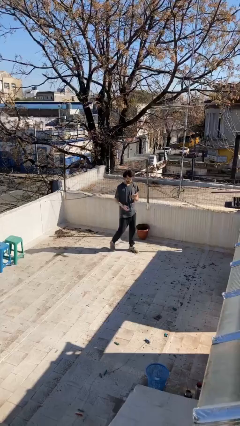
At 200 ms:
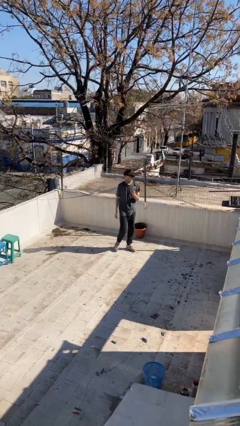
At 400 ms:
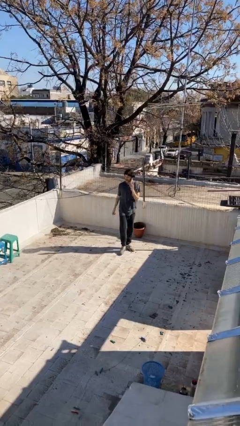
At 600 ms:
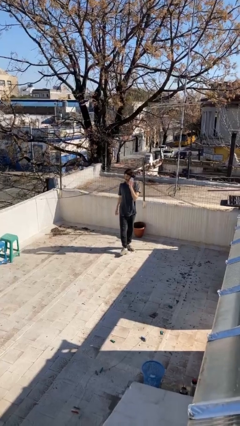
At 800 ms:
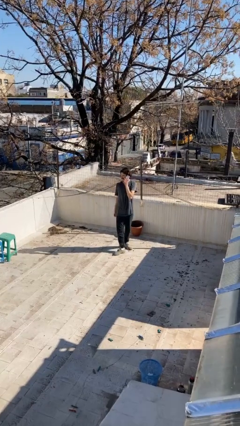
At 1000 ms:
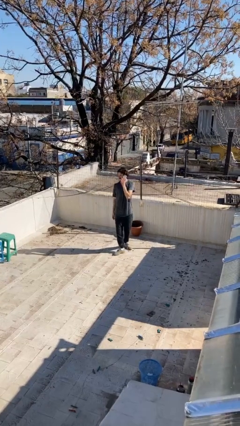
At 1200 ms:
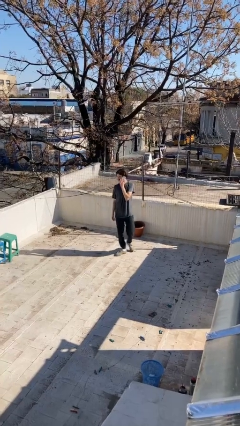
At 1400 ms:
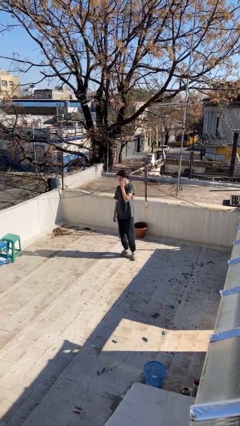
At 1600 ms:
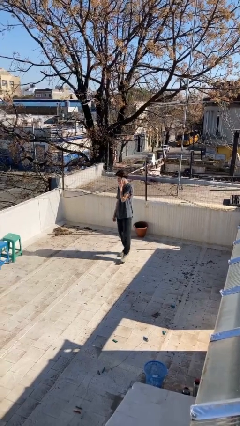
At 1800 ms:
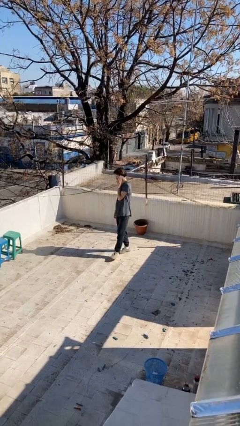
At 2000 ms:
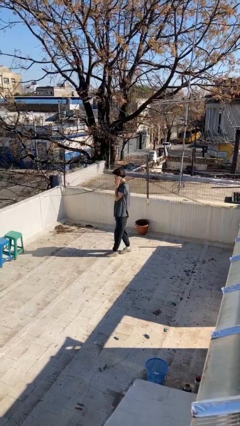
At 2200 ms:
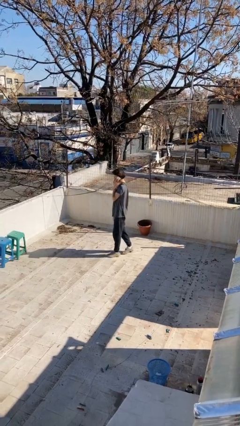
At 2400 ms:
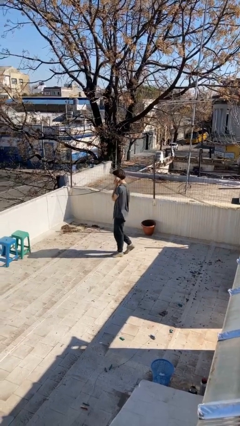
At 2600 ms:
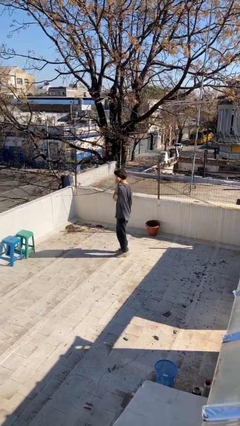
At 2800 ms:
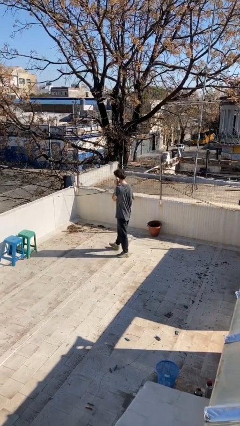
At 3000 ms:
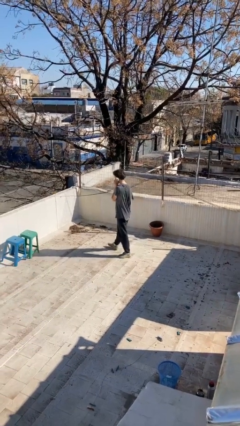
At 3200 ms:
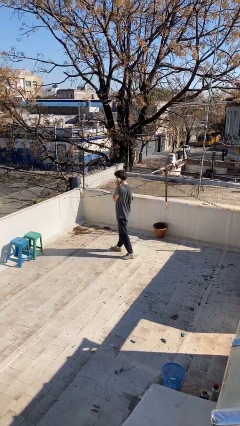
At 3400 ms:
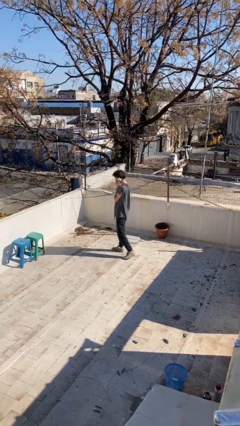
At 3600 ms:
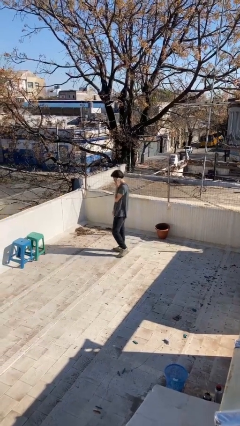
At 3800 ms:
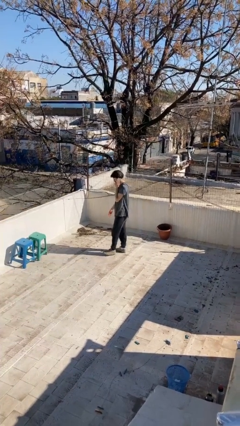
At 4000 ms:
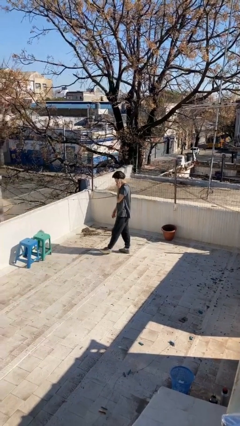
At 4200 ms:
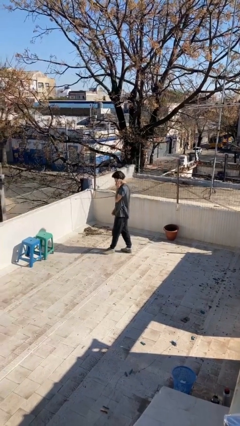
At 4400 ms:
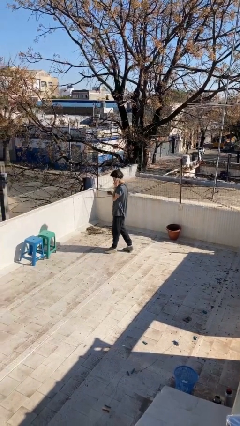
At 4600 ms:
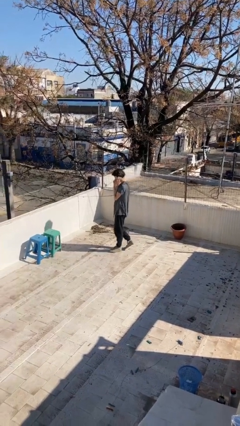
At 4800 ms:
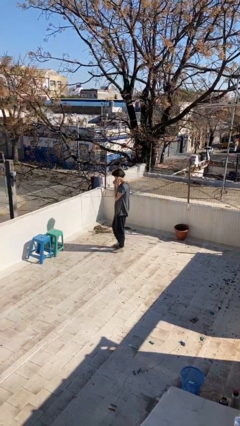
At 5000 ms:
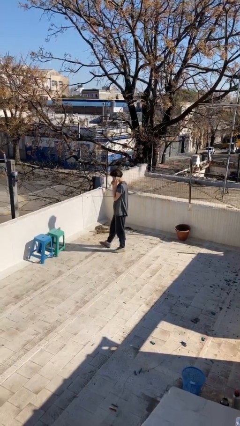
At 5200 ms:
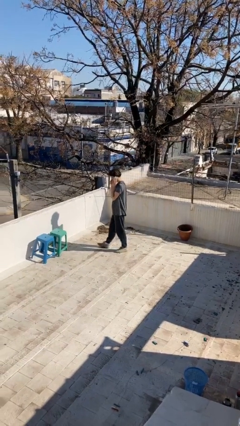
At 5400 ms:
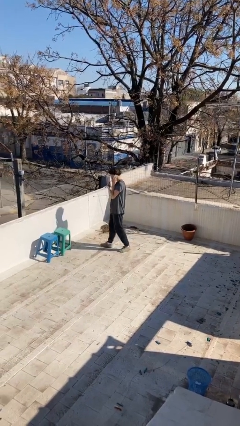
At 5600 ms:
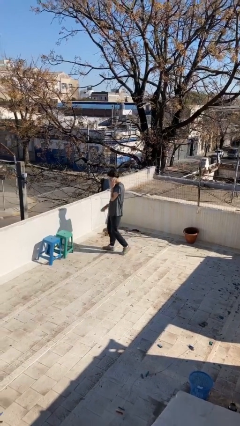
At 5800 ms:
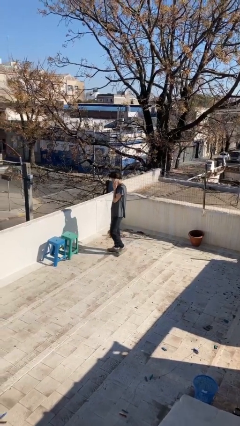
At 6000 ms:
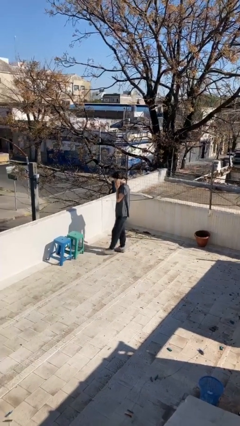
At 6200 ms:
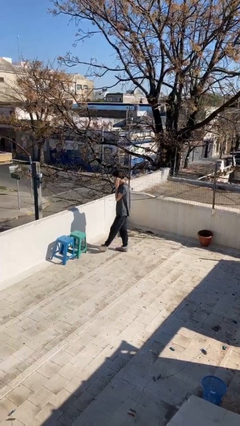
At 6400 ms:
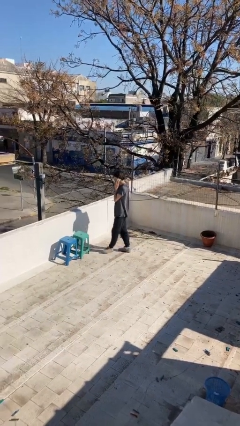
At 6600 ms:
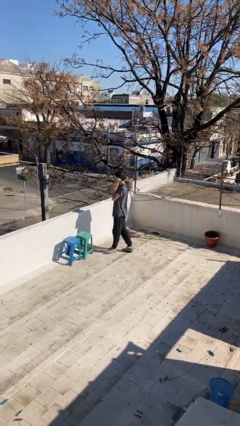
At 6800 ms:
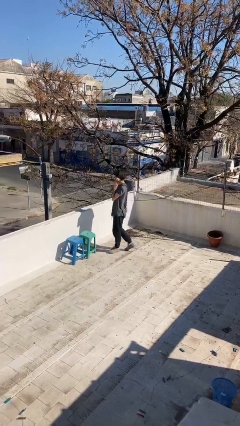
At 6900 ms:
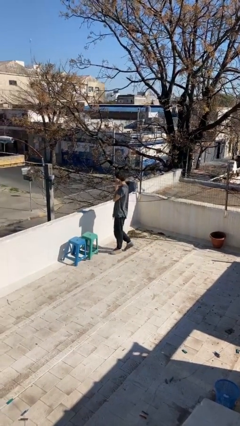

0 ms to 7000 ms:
person talks on phone

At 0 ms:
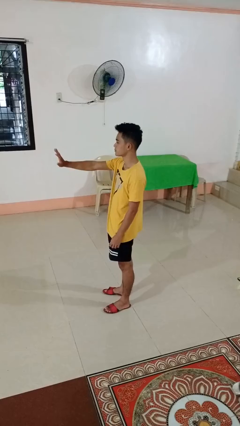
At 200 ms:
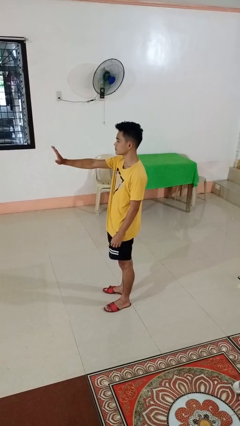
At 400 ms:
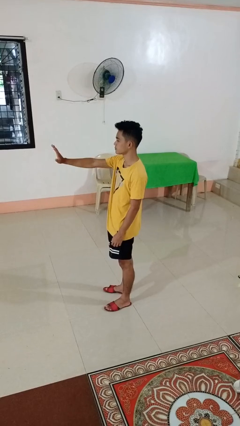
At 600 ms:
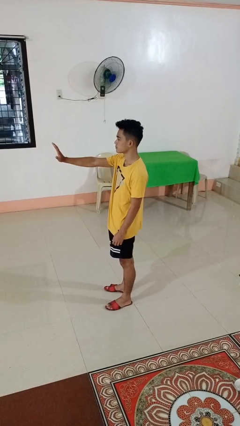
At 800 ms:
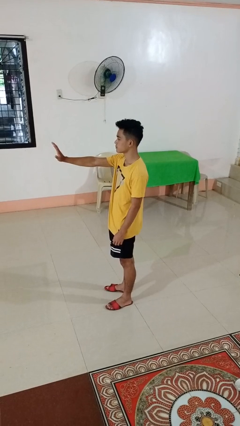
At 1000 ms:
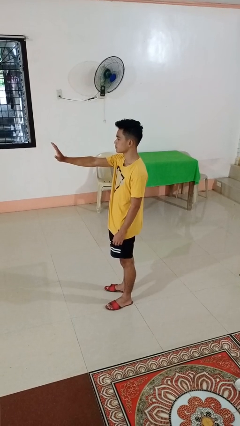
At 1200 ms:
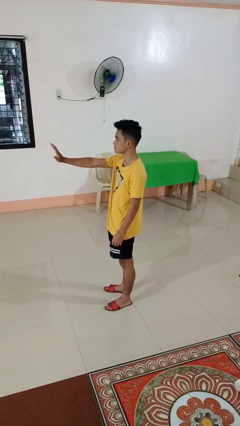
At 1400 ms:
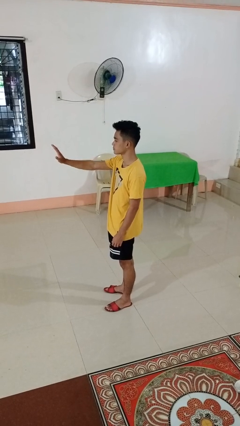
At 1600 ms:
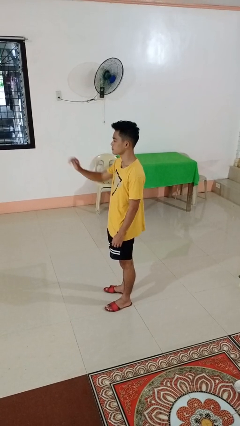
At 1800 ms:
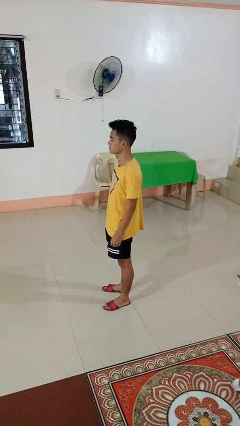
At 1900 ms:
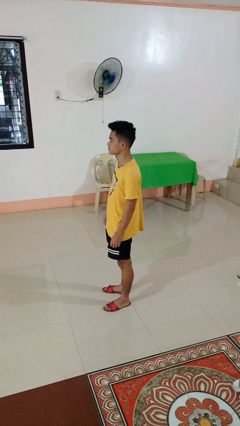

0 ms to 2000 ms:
person gestures stop

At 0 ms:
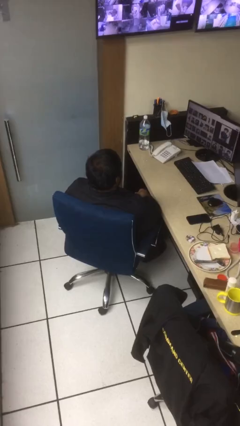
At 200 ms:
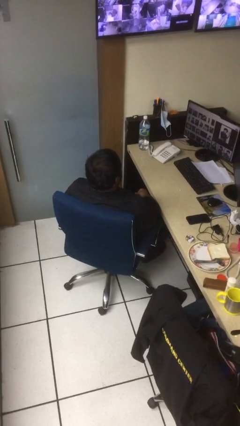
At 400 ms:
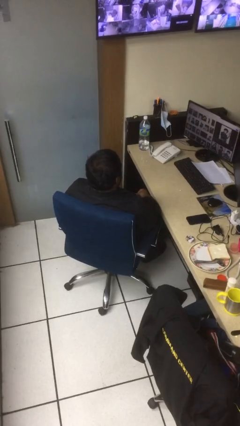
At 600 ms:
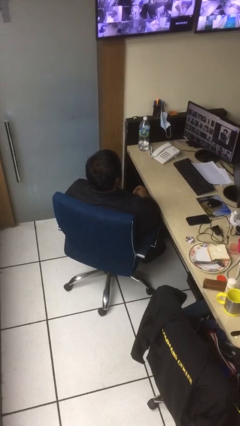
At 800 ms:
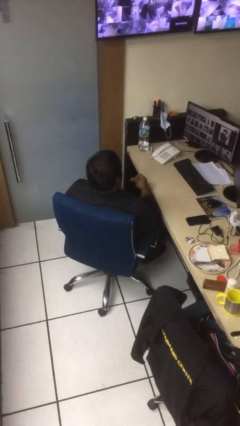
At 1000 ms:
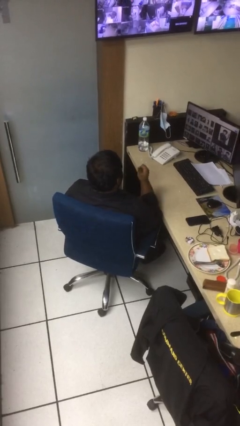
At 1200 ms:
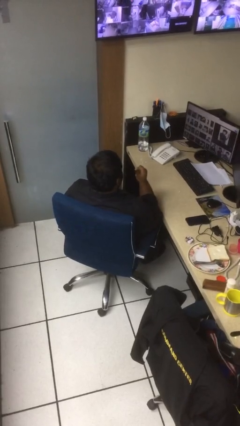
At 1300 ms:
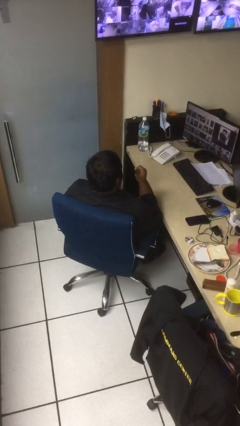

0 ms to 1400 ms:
person snaps fingers

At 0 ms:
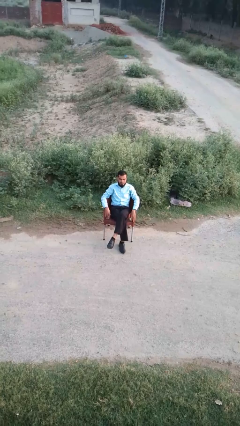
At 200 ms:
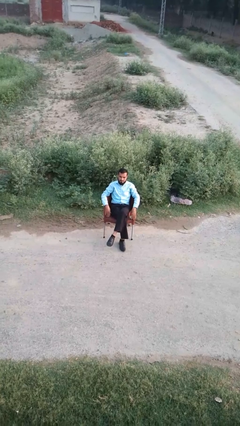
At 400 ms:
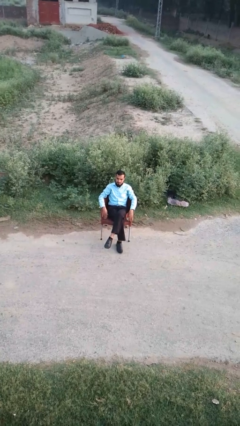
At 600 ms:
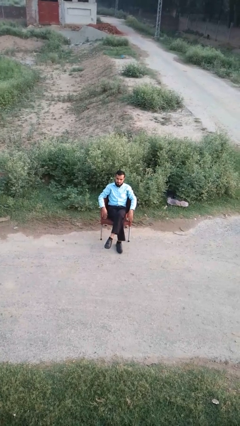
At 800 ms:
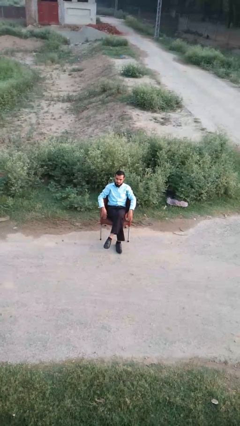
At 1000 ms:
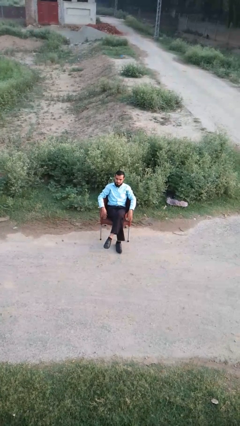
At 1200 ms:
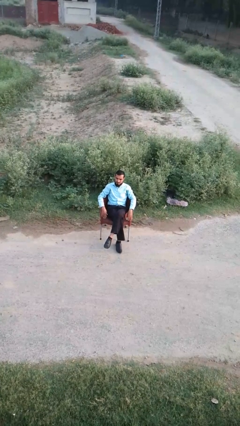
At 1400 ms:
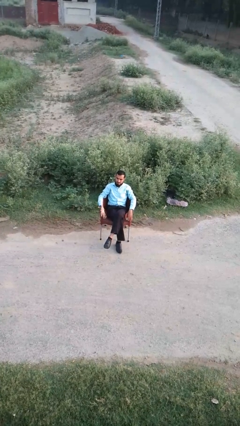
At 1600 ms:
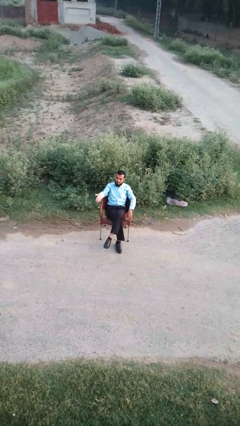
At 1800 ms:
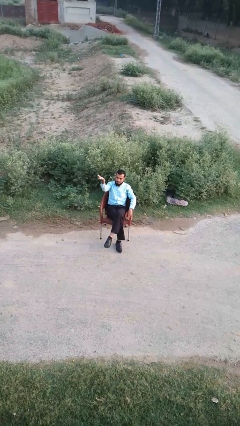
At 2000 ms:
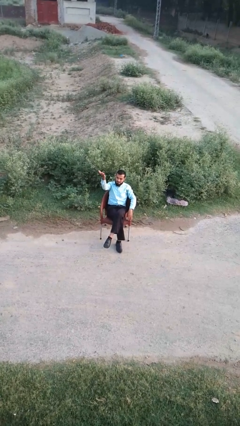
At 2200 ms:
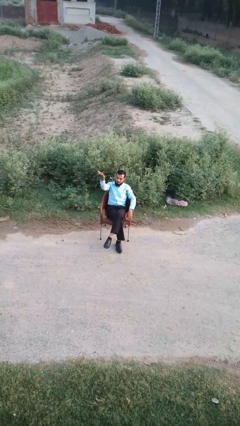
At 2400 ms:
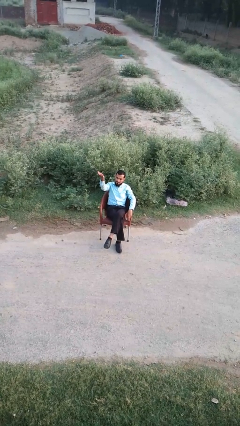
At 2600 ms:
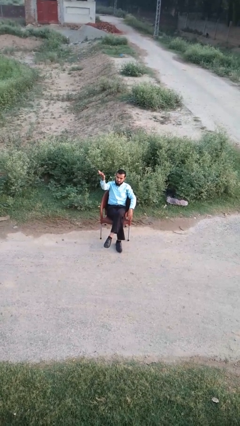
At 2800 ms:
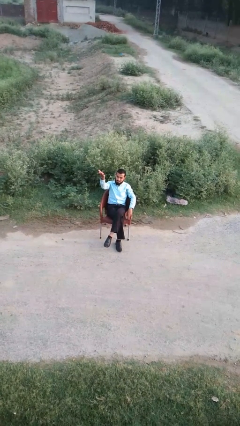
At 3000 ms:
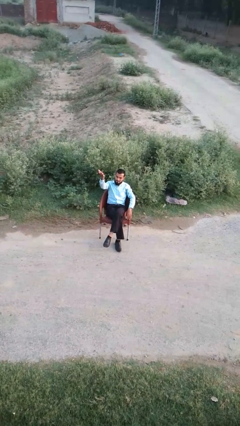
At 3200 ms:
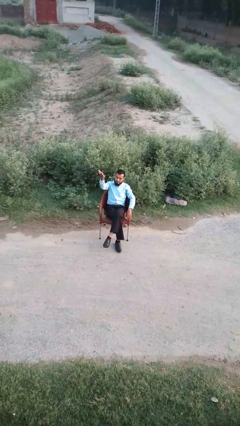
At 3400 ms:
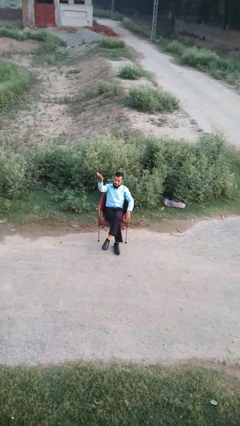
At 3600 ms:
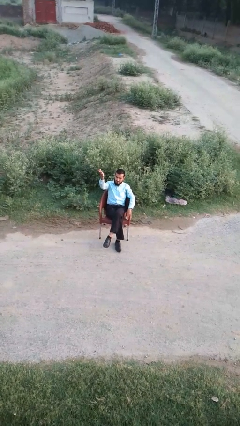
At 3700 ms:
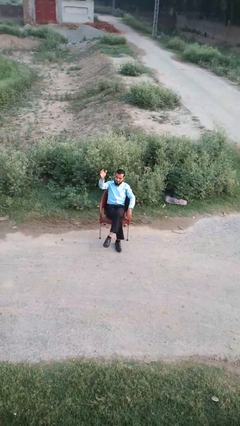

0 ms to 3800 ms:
person gestures swipe up

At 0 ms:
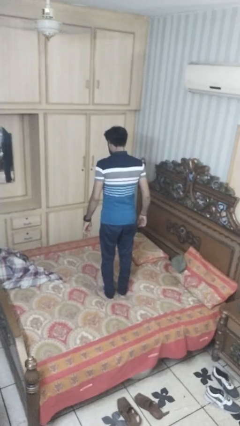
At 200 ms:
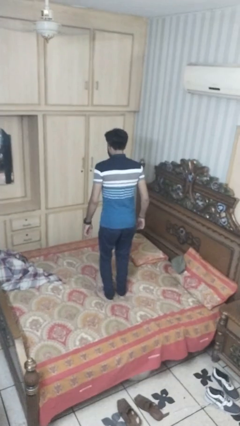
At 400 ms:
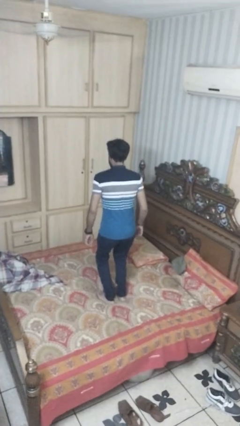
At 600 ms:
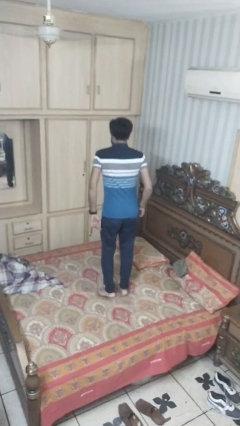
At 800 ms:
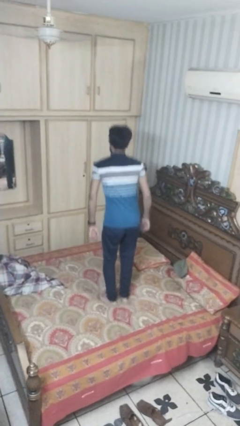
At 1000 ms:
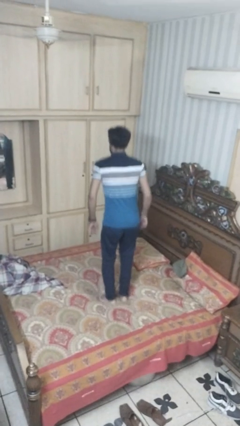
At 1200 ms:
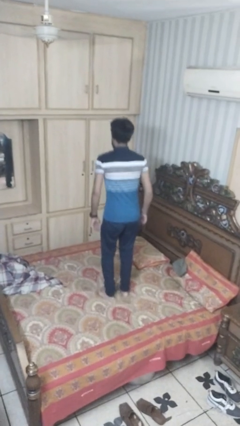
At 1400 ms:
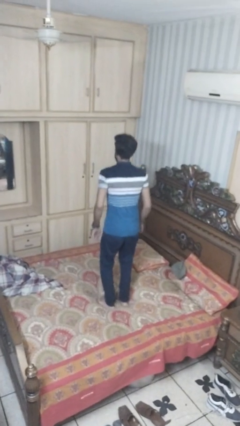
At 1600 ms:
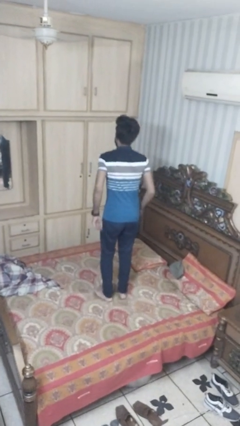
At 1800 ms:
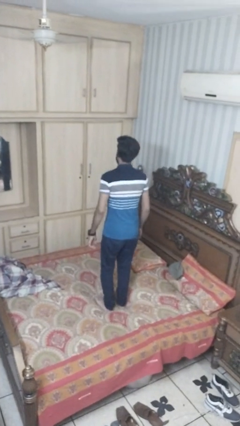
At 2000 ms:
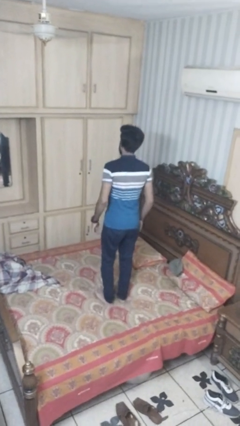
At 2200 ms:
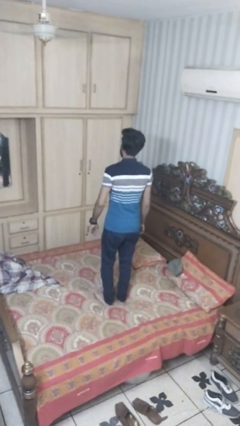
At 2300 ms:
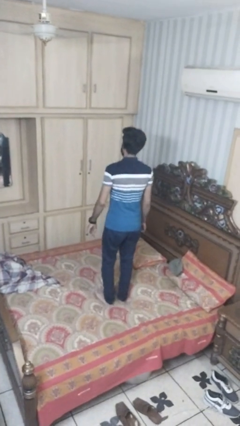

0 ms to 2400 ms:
person jumps on bed

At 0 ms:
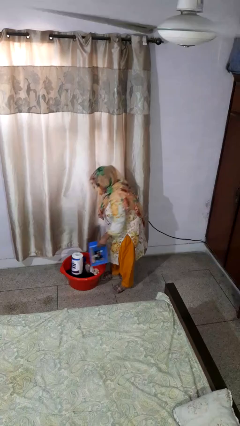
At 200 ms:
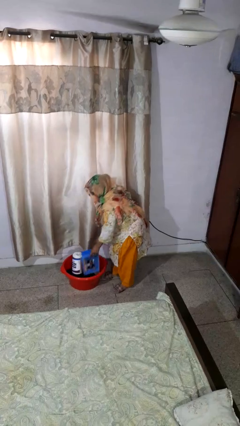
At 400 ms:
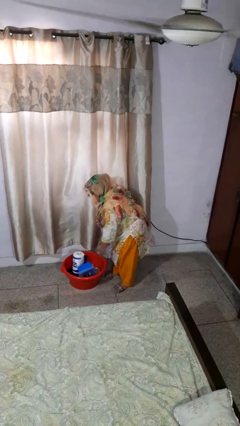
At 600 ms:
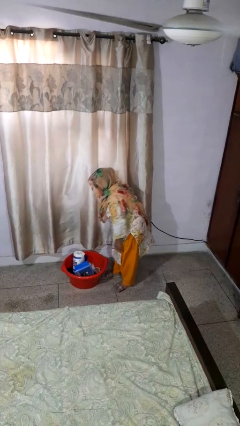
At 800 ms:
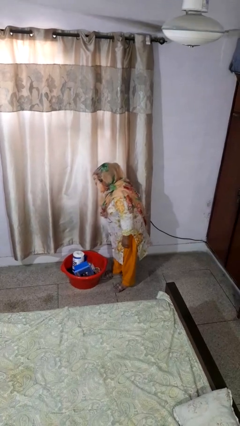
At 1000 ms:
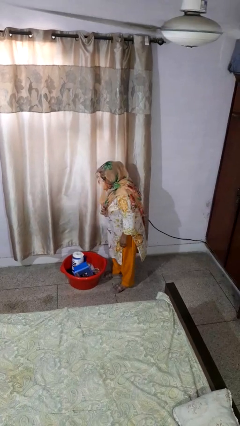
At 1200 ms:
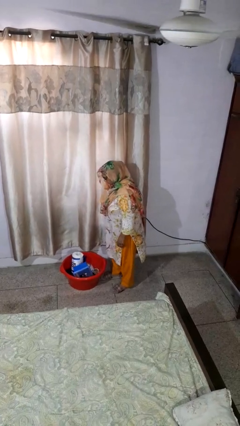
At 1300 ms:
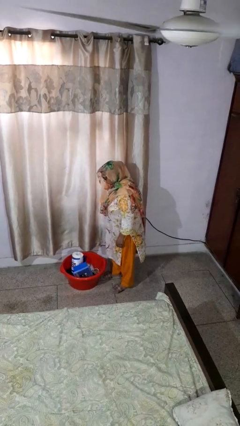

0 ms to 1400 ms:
person puts object into basket
